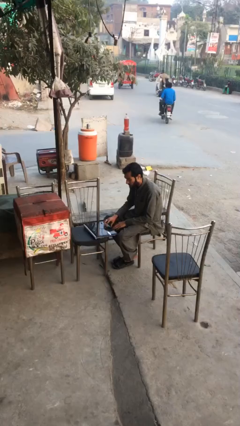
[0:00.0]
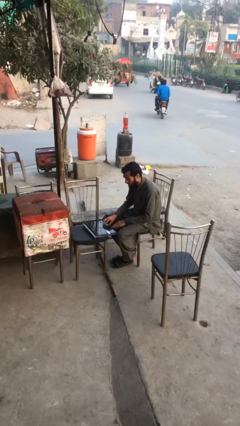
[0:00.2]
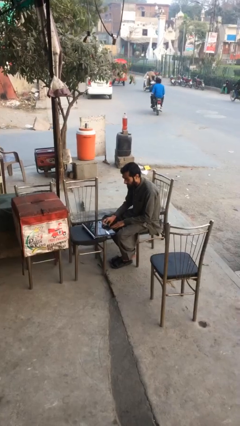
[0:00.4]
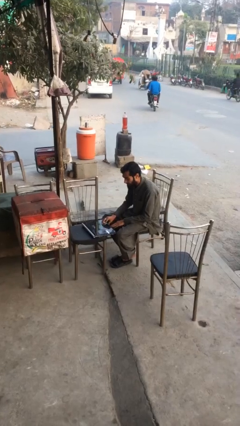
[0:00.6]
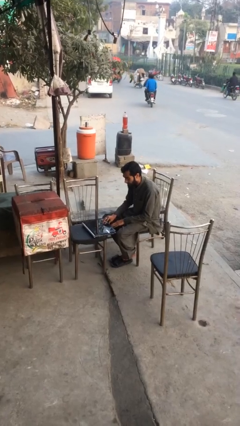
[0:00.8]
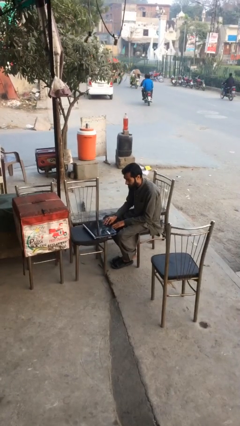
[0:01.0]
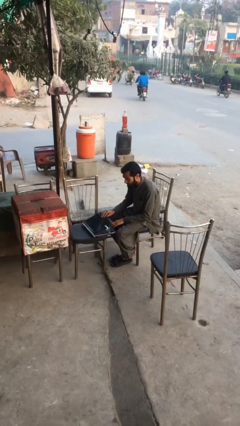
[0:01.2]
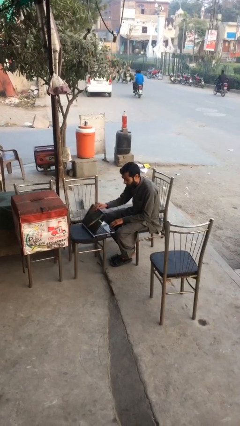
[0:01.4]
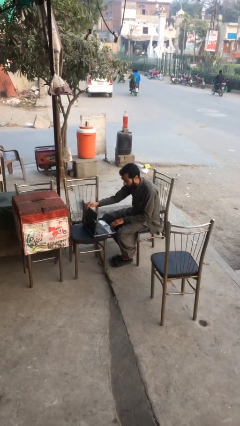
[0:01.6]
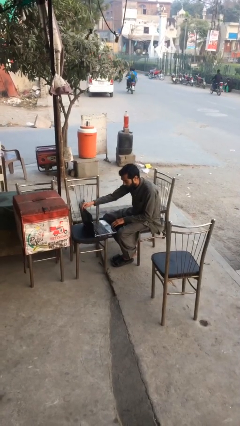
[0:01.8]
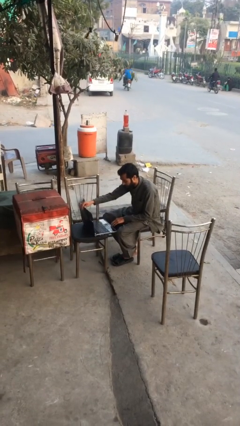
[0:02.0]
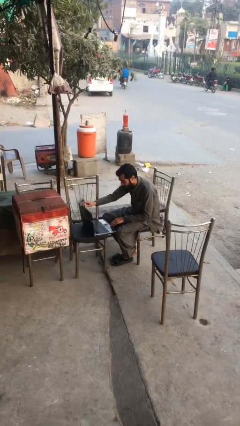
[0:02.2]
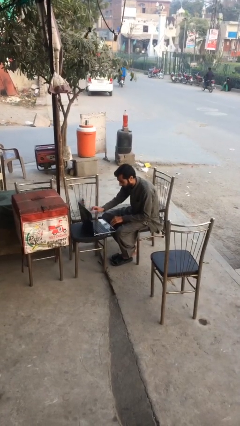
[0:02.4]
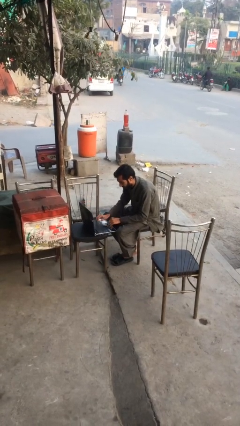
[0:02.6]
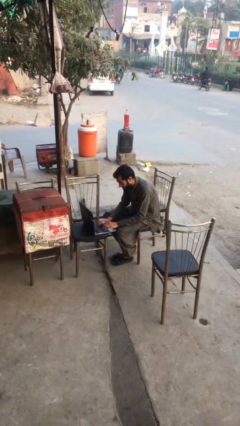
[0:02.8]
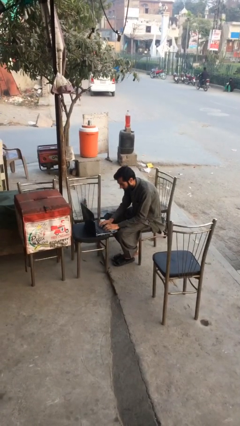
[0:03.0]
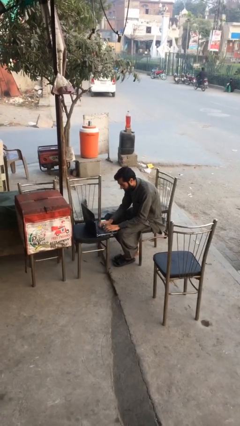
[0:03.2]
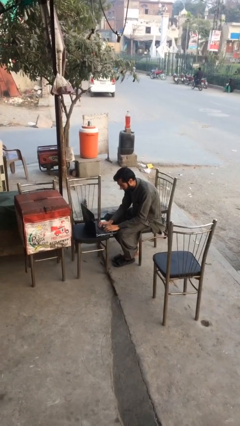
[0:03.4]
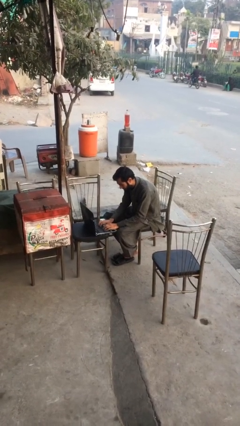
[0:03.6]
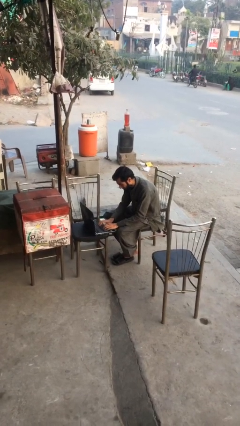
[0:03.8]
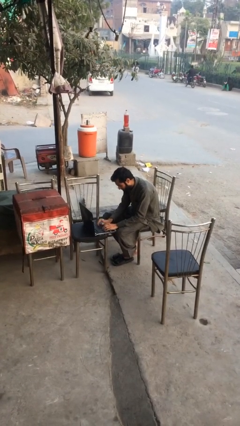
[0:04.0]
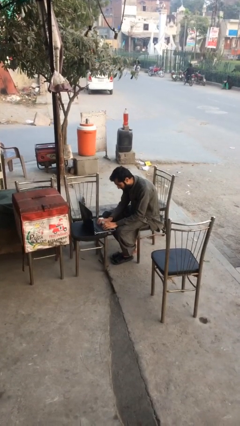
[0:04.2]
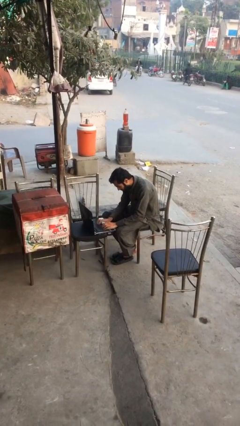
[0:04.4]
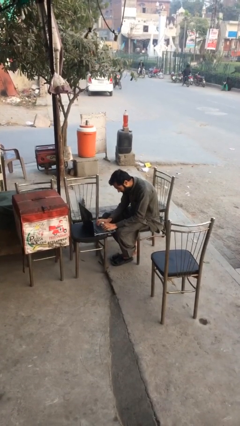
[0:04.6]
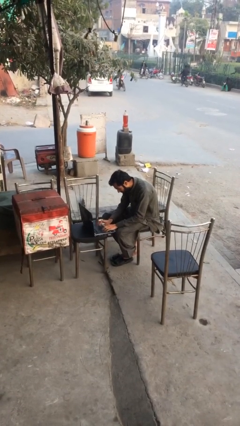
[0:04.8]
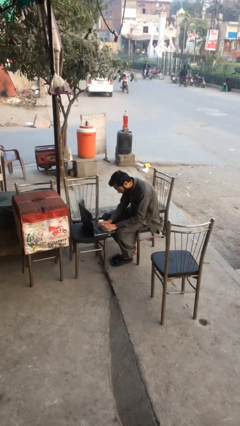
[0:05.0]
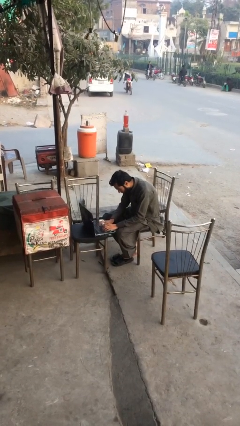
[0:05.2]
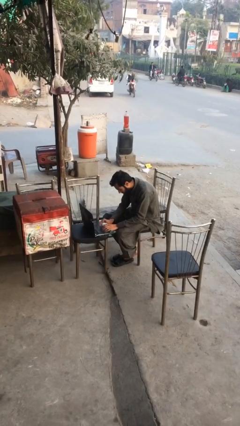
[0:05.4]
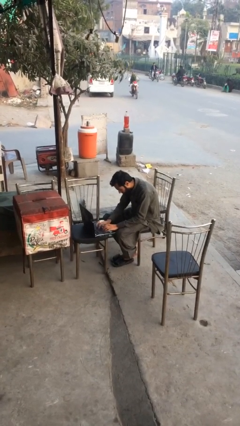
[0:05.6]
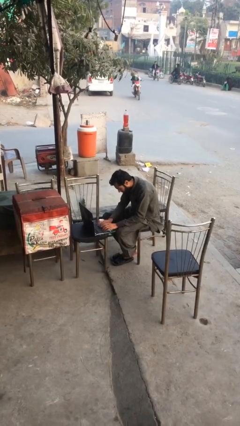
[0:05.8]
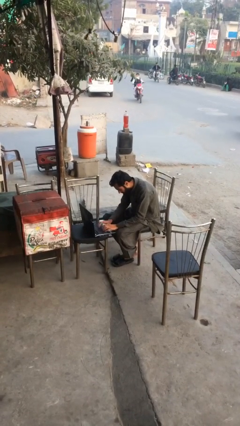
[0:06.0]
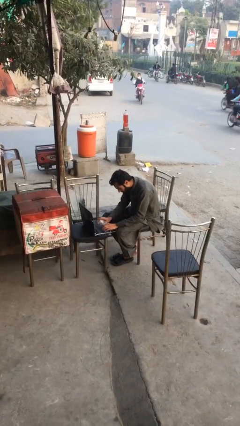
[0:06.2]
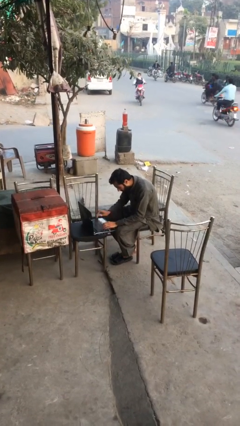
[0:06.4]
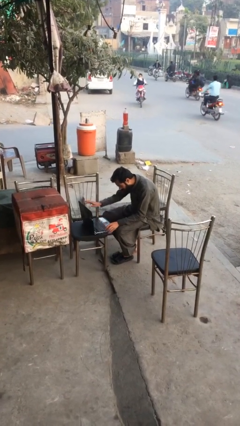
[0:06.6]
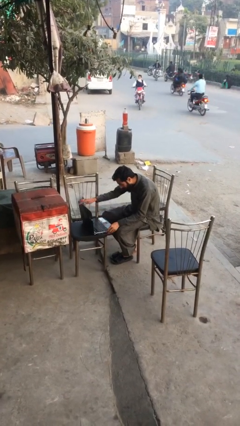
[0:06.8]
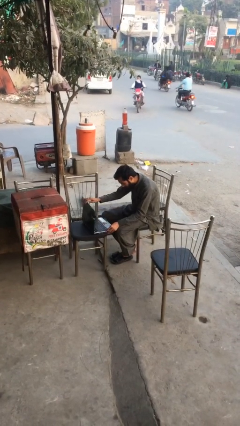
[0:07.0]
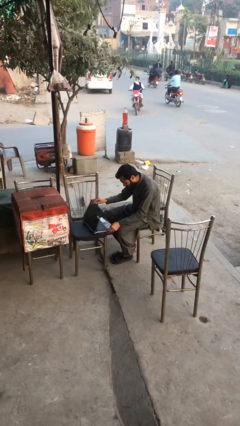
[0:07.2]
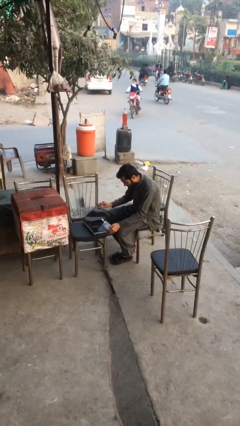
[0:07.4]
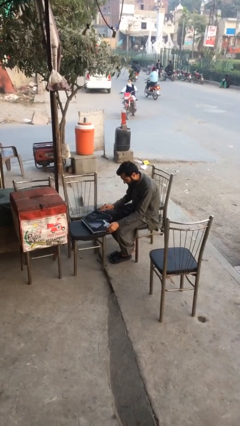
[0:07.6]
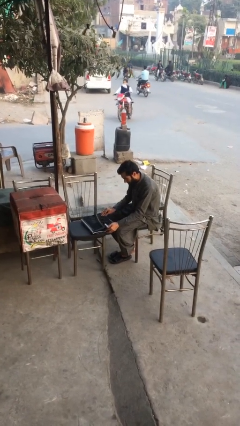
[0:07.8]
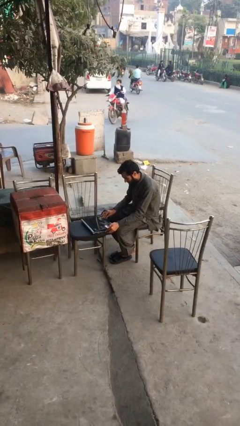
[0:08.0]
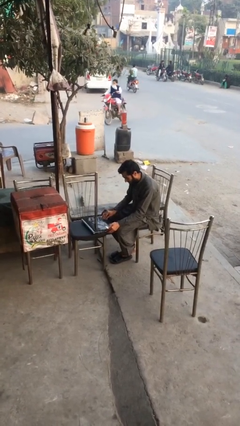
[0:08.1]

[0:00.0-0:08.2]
person interacts with laptop

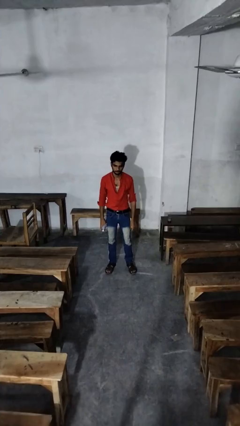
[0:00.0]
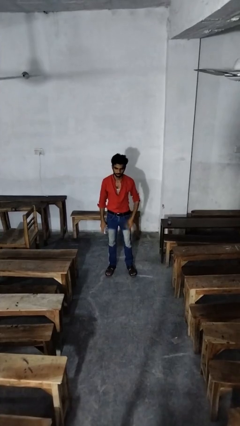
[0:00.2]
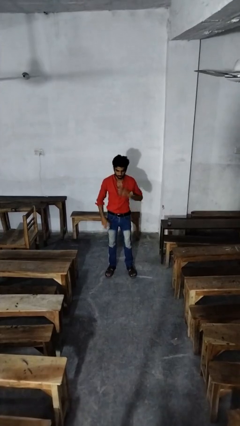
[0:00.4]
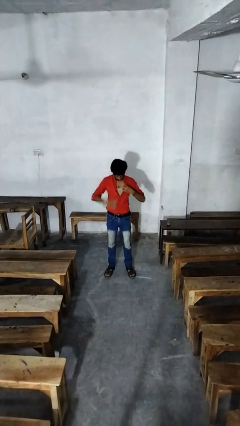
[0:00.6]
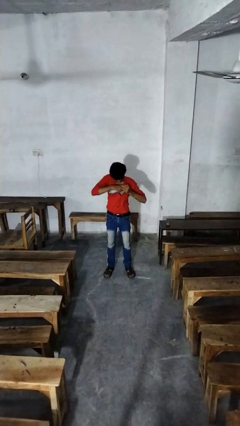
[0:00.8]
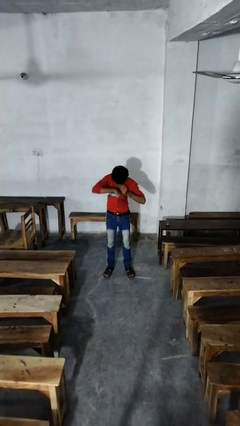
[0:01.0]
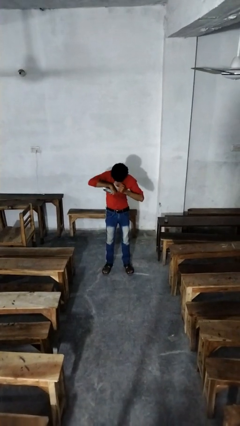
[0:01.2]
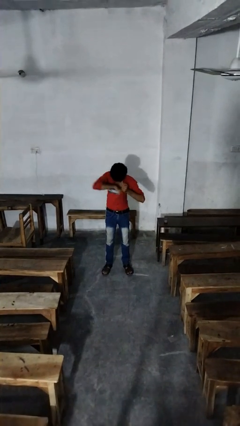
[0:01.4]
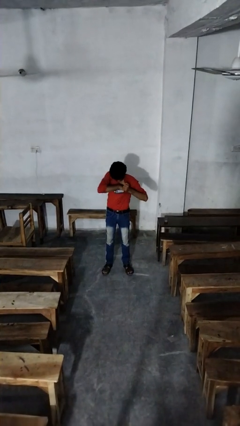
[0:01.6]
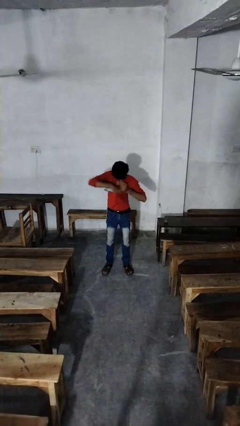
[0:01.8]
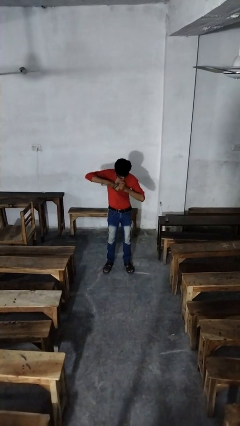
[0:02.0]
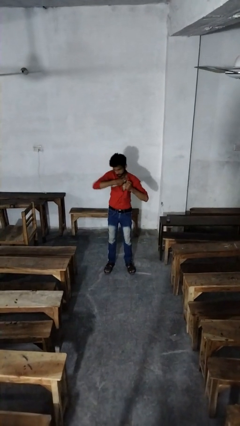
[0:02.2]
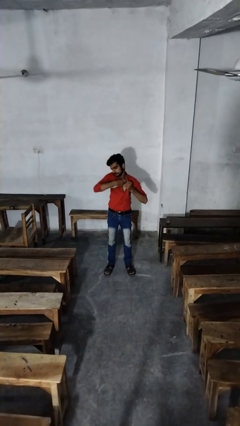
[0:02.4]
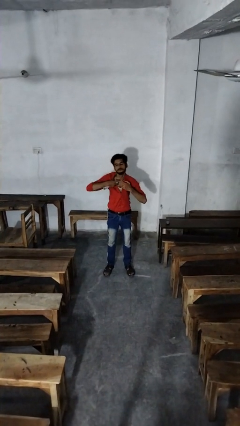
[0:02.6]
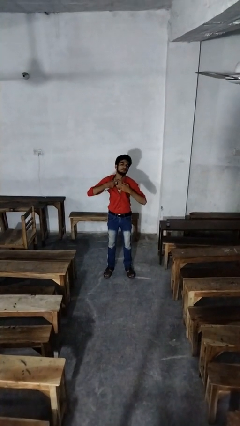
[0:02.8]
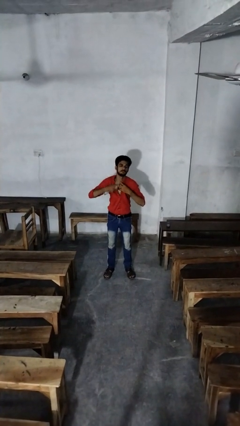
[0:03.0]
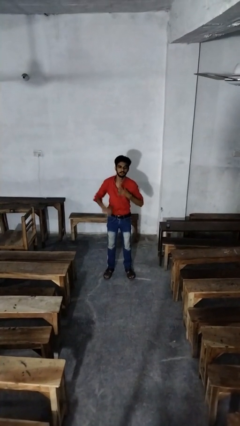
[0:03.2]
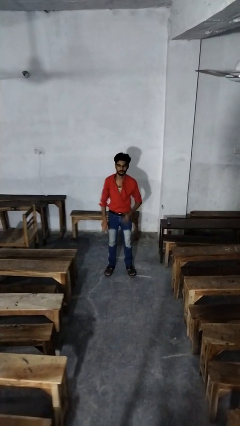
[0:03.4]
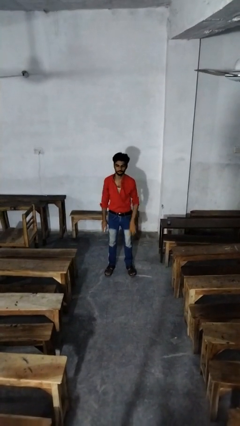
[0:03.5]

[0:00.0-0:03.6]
person applies deodorant

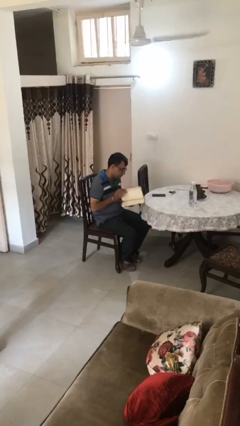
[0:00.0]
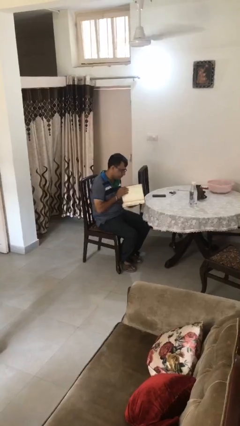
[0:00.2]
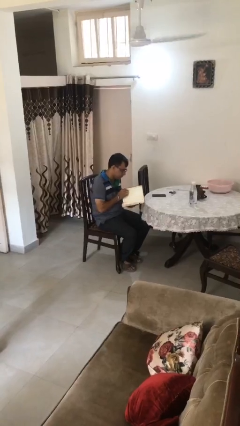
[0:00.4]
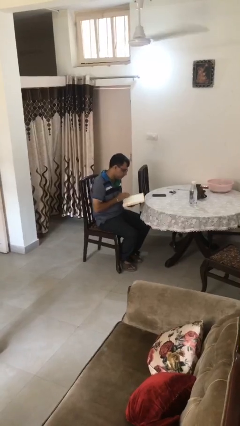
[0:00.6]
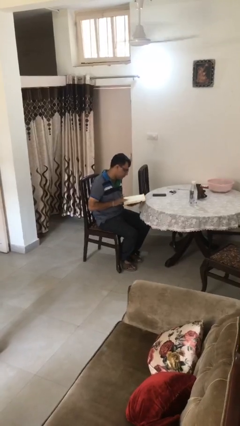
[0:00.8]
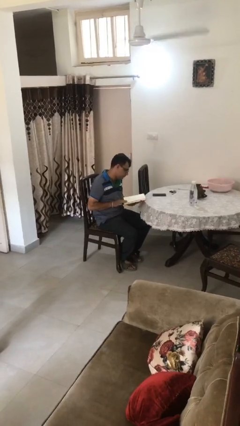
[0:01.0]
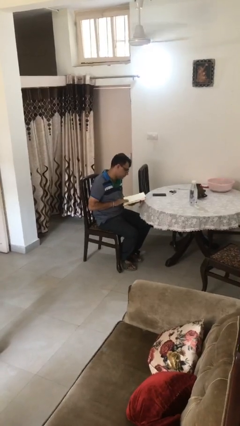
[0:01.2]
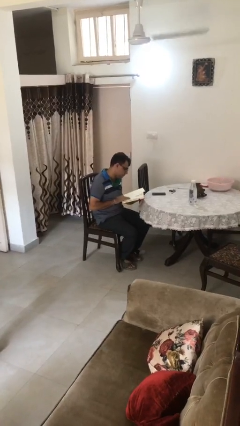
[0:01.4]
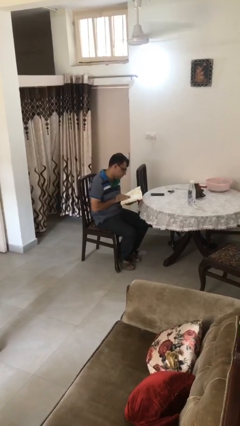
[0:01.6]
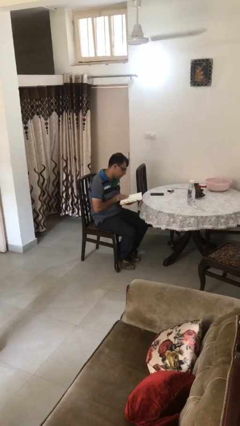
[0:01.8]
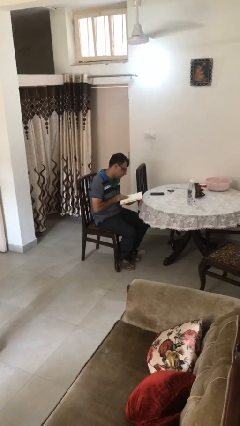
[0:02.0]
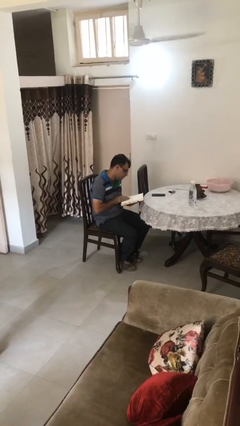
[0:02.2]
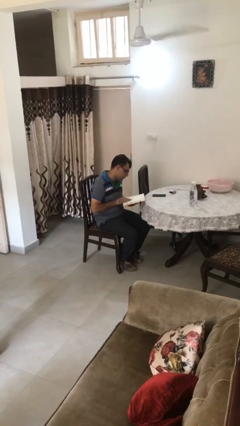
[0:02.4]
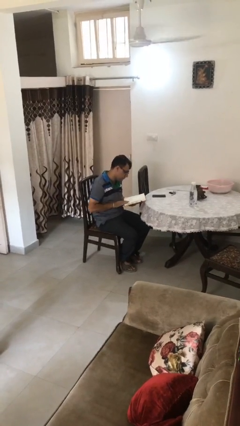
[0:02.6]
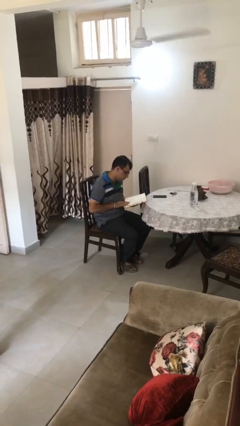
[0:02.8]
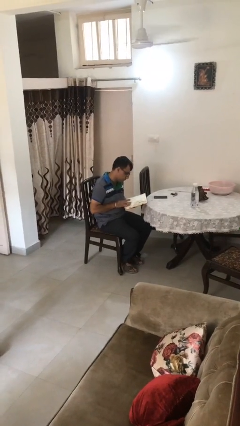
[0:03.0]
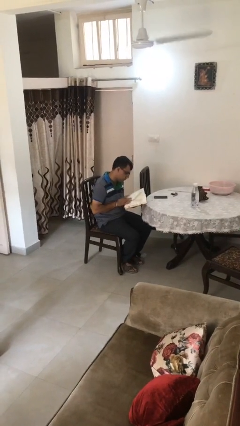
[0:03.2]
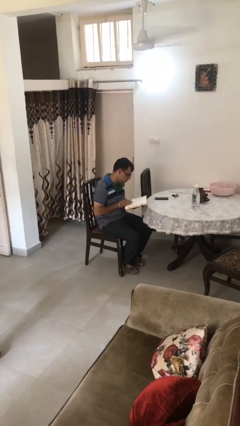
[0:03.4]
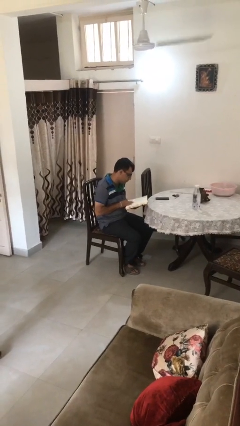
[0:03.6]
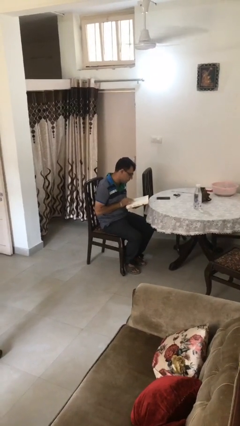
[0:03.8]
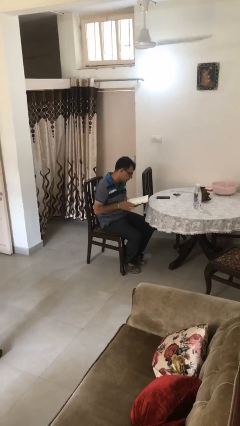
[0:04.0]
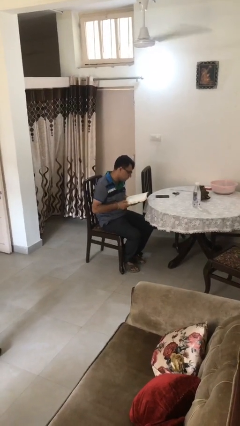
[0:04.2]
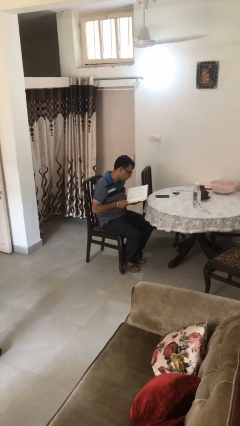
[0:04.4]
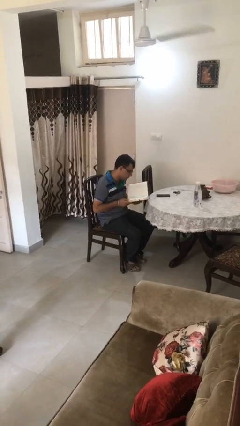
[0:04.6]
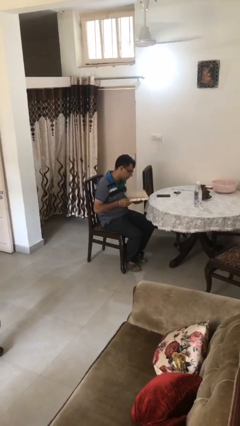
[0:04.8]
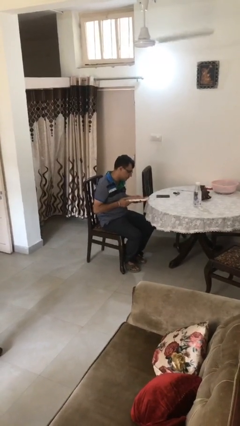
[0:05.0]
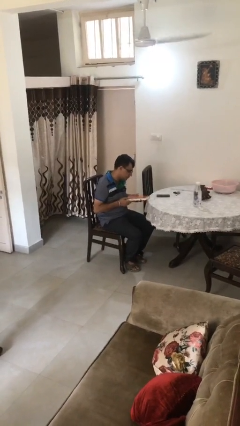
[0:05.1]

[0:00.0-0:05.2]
person reads document

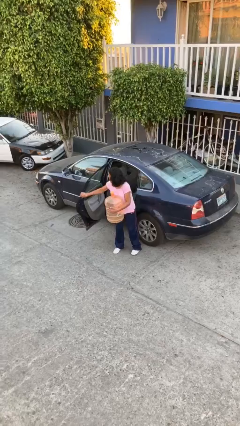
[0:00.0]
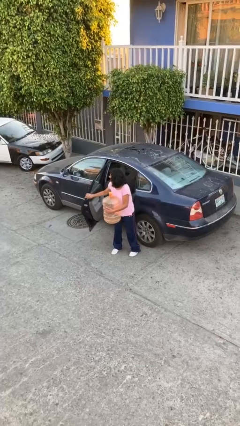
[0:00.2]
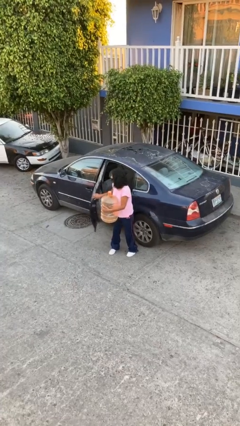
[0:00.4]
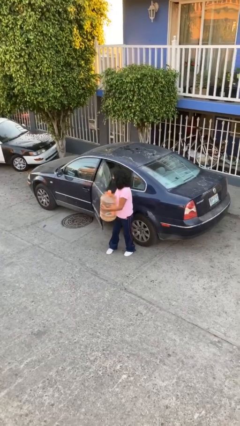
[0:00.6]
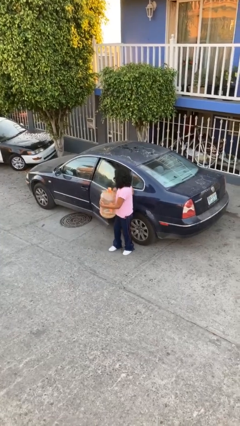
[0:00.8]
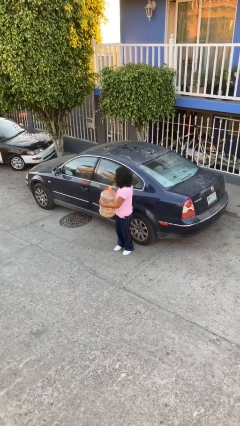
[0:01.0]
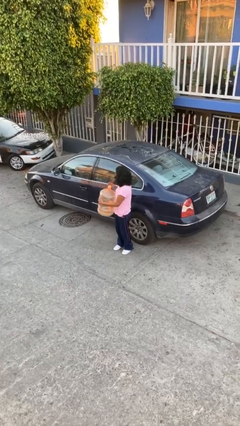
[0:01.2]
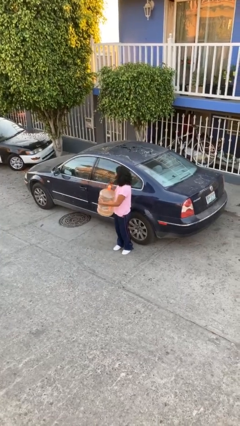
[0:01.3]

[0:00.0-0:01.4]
person closes car door
